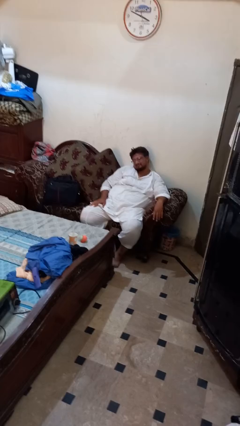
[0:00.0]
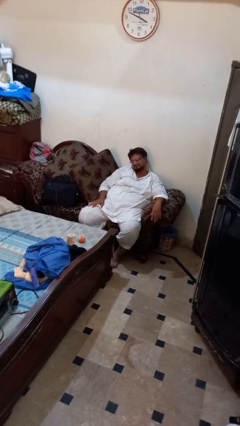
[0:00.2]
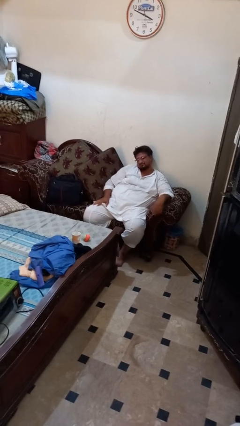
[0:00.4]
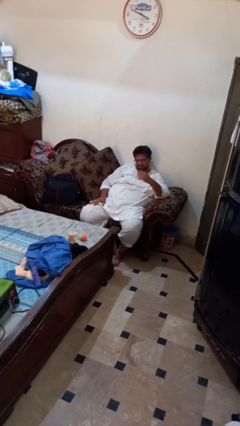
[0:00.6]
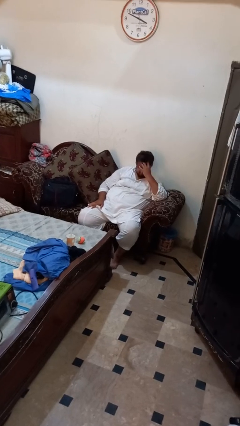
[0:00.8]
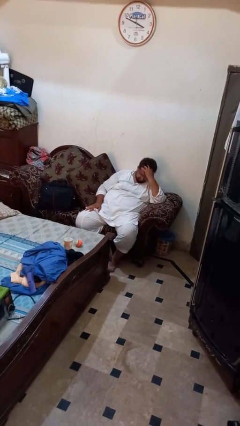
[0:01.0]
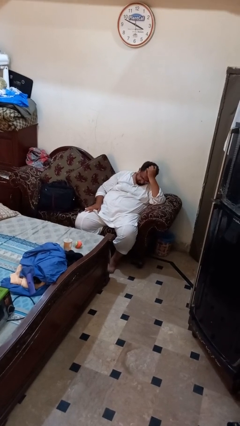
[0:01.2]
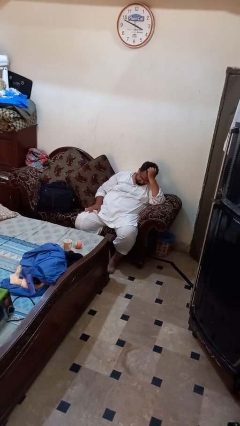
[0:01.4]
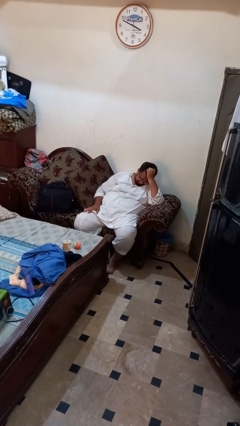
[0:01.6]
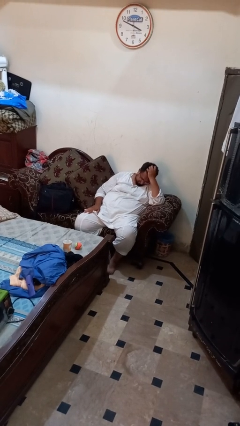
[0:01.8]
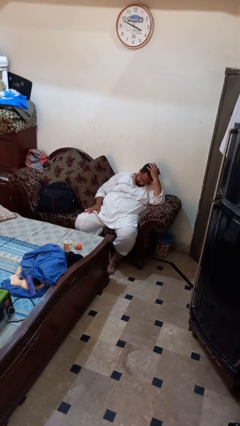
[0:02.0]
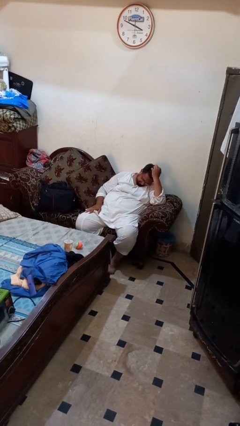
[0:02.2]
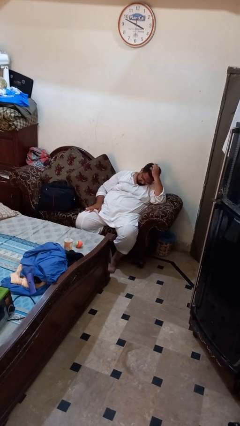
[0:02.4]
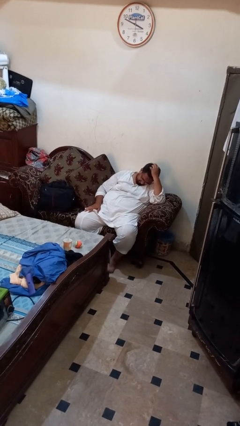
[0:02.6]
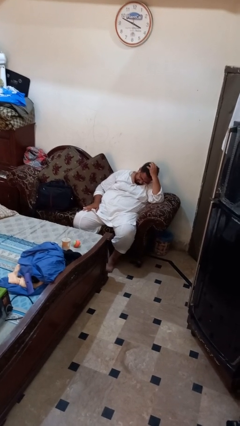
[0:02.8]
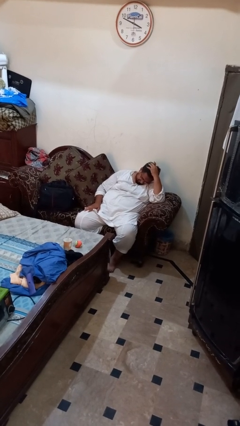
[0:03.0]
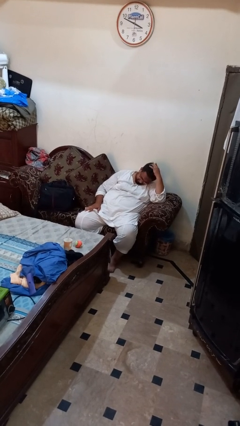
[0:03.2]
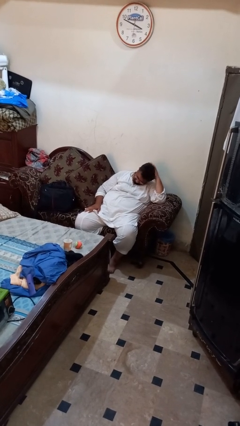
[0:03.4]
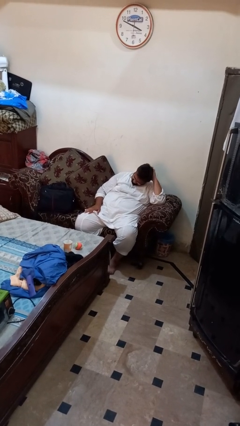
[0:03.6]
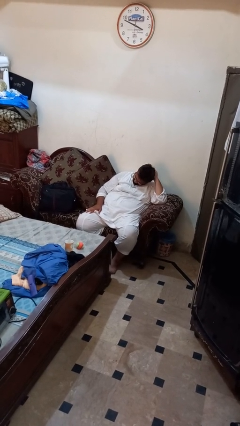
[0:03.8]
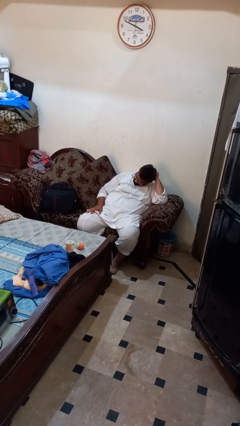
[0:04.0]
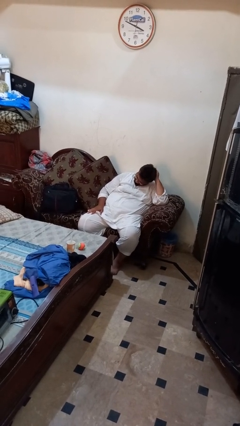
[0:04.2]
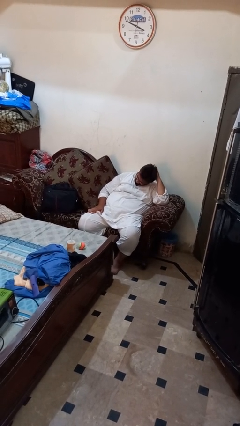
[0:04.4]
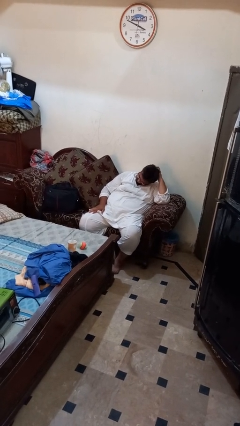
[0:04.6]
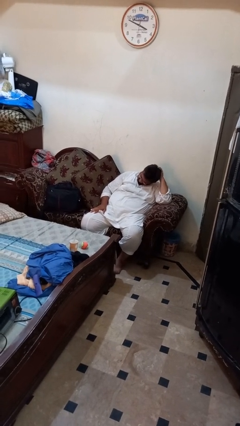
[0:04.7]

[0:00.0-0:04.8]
person strokes hair

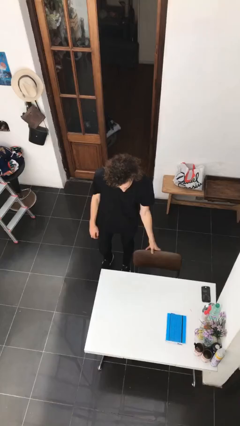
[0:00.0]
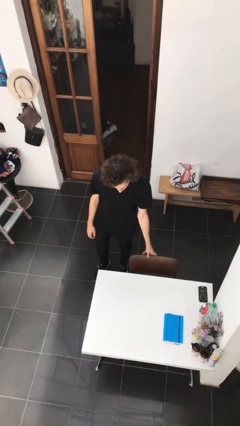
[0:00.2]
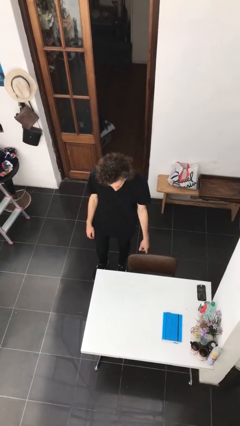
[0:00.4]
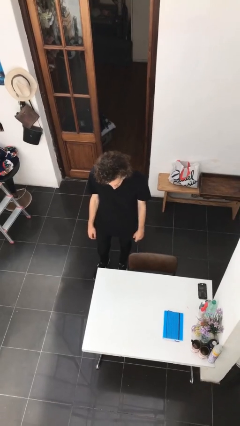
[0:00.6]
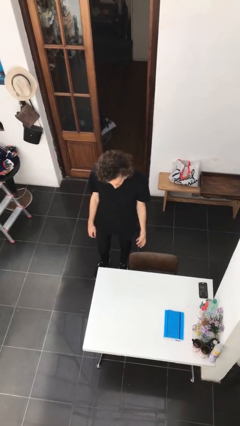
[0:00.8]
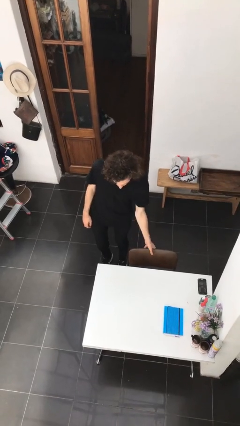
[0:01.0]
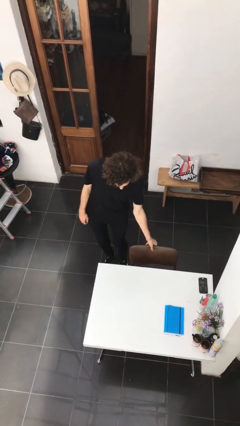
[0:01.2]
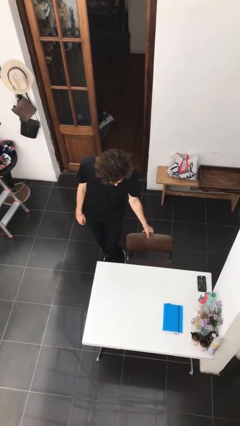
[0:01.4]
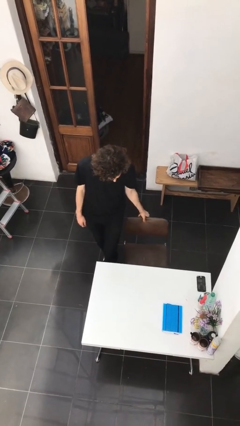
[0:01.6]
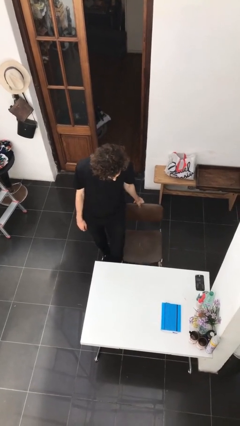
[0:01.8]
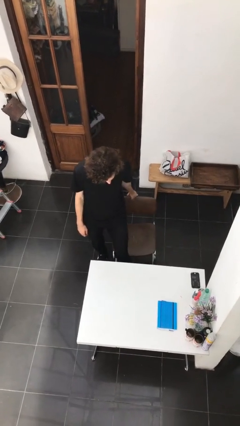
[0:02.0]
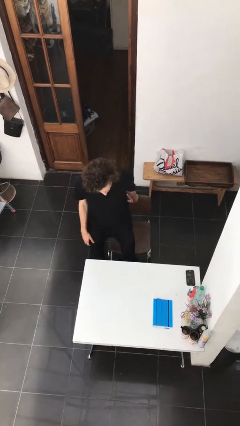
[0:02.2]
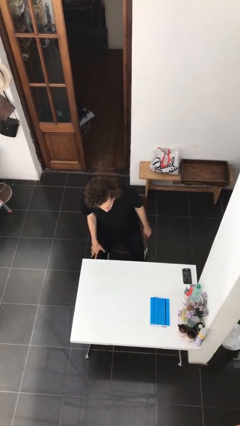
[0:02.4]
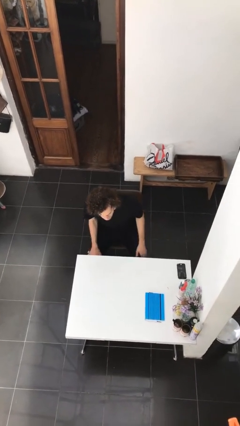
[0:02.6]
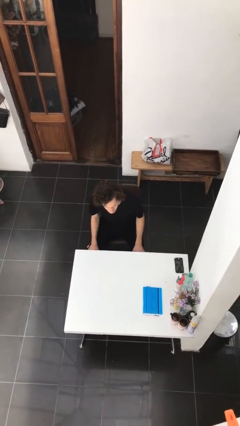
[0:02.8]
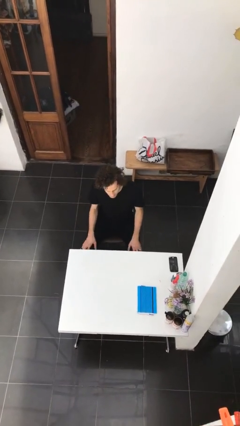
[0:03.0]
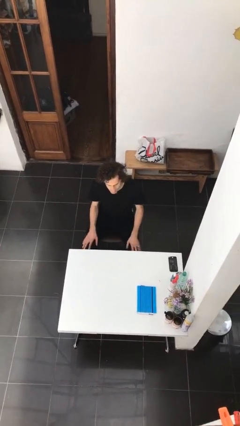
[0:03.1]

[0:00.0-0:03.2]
person sits down

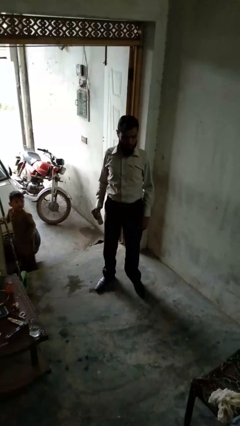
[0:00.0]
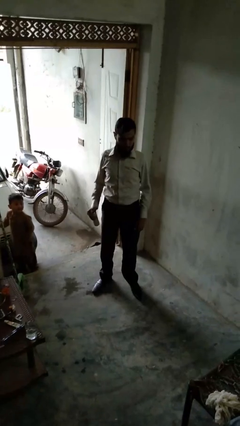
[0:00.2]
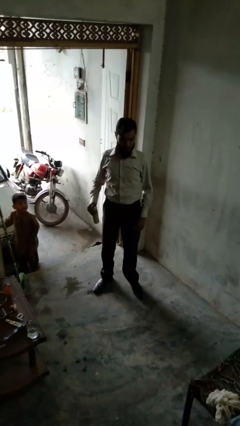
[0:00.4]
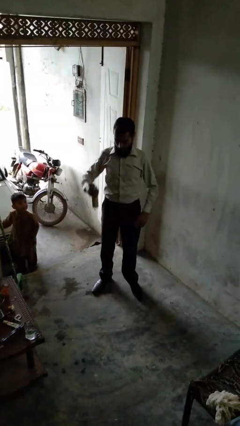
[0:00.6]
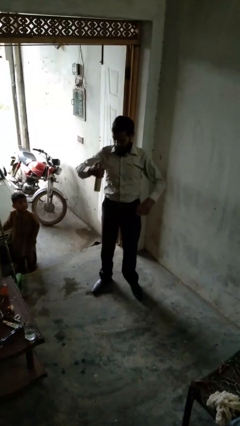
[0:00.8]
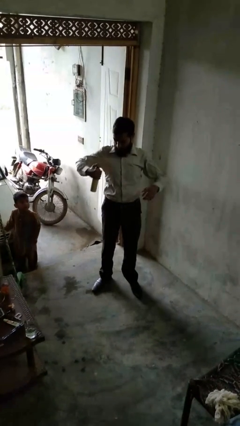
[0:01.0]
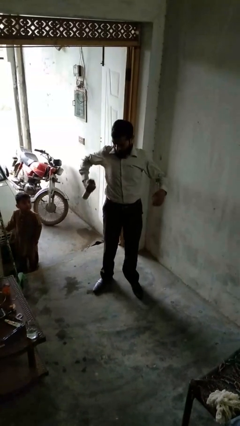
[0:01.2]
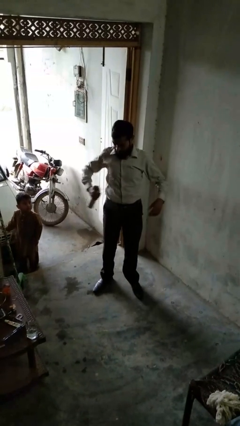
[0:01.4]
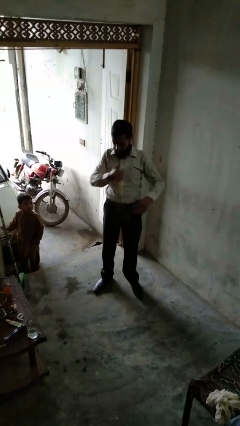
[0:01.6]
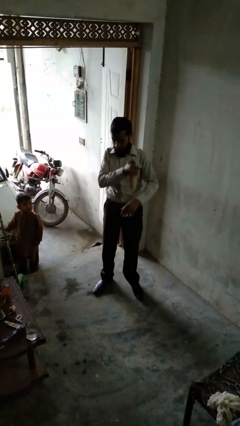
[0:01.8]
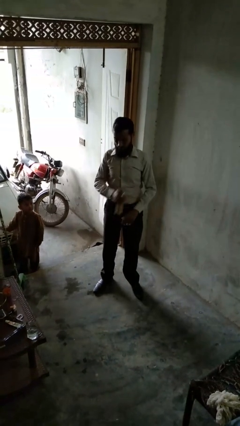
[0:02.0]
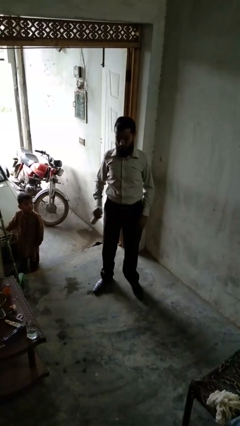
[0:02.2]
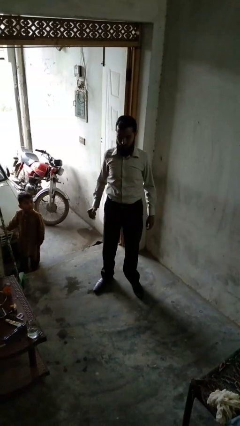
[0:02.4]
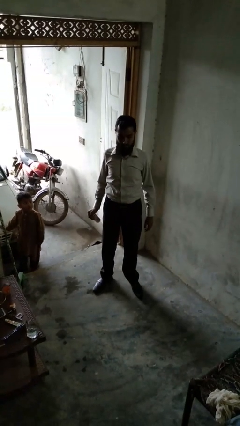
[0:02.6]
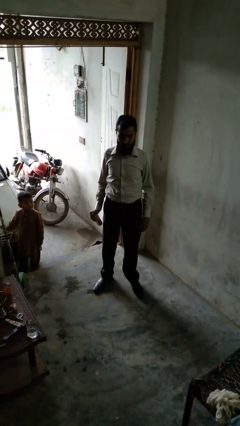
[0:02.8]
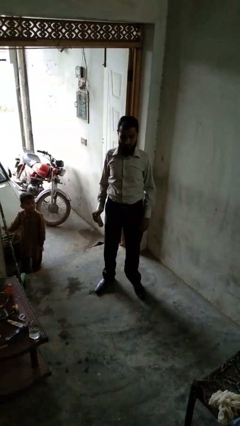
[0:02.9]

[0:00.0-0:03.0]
person applies deodorant

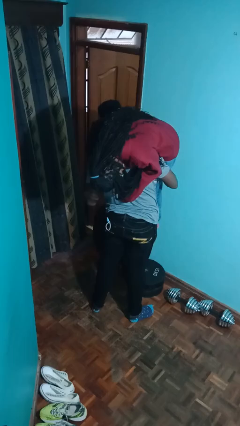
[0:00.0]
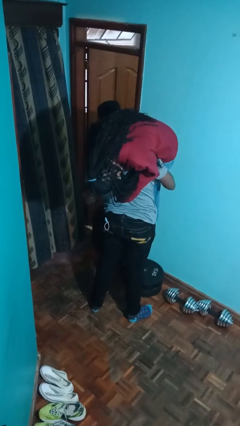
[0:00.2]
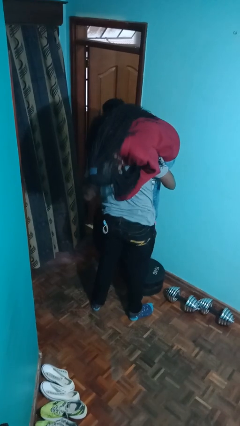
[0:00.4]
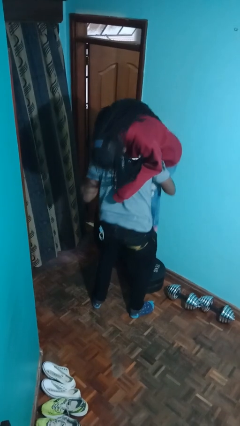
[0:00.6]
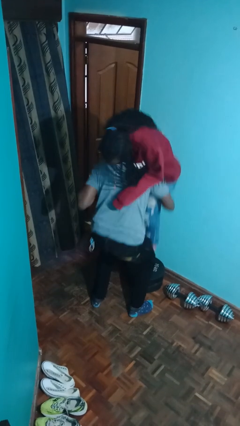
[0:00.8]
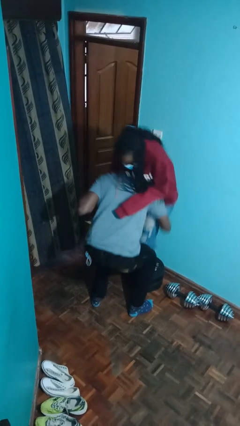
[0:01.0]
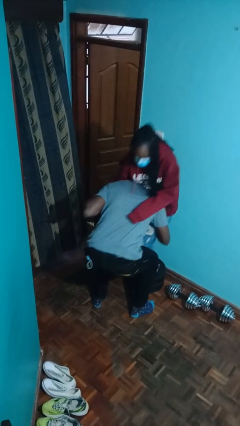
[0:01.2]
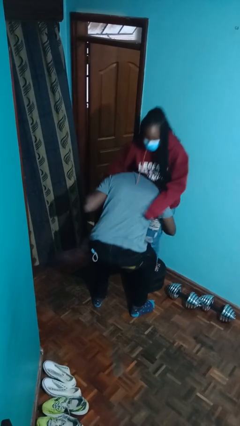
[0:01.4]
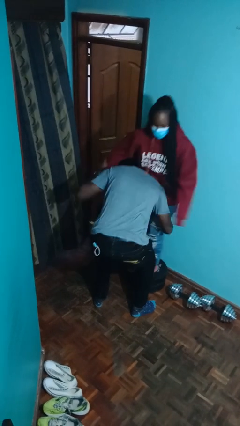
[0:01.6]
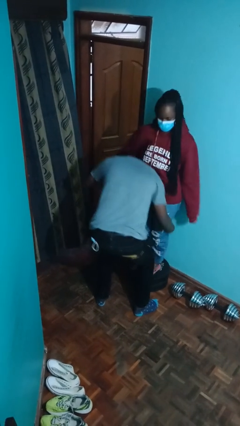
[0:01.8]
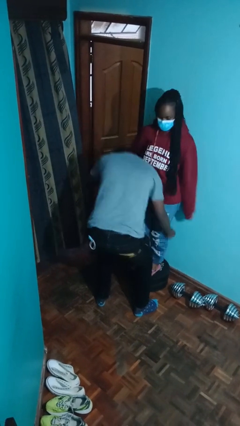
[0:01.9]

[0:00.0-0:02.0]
person puts down person

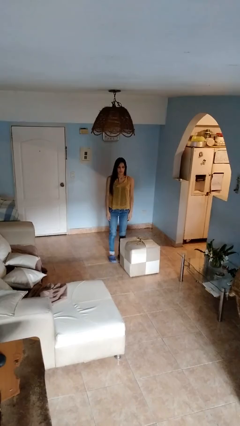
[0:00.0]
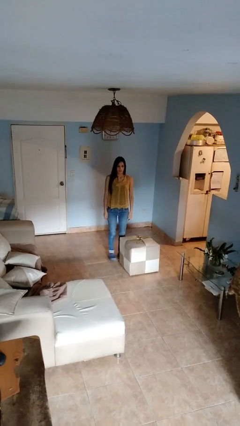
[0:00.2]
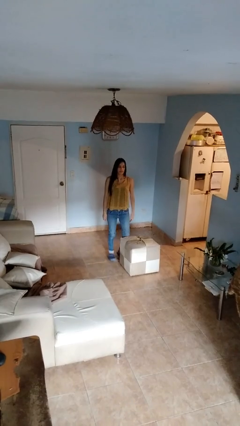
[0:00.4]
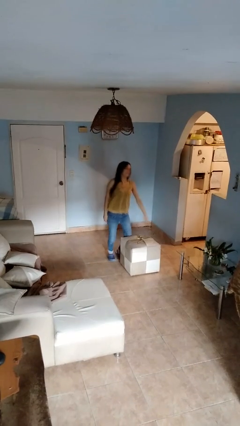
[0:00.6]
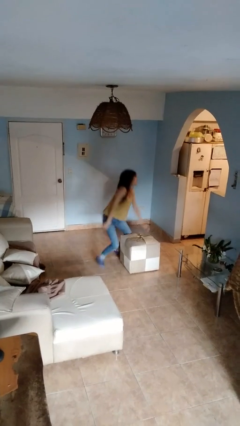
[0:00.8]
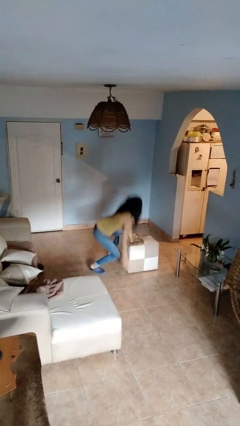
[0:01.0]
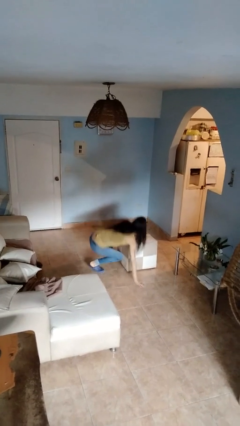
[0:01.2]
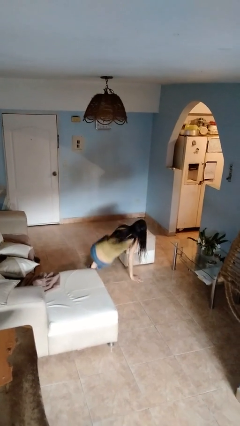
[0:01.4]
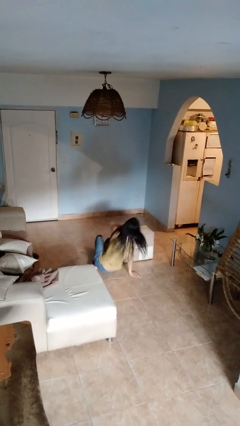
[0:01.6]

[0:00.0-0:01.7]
person trips on object on floor

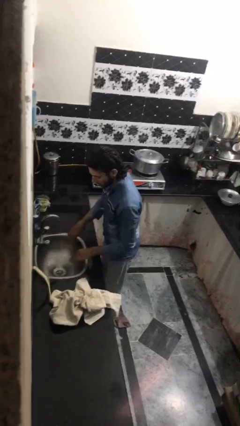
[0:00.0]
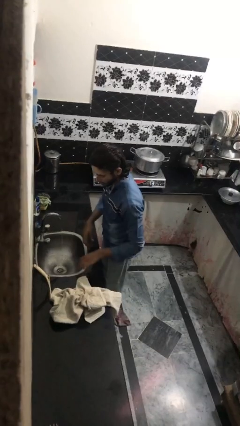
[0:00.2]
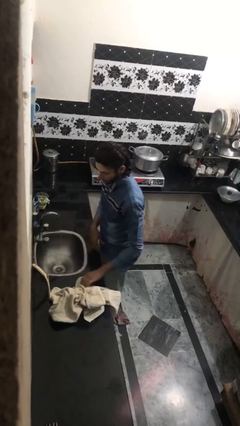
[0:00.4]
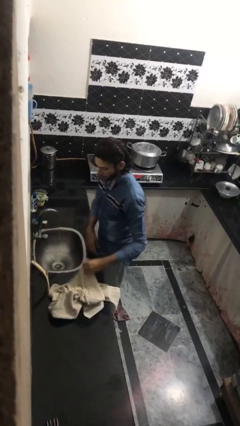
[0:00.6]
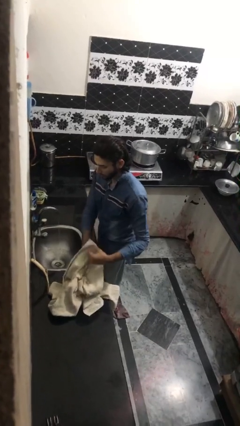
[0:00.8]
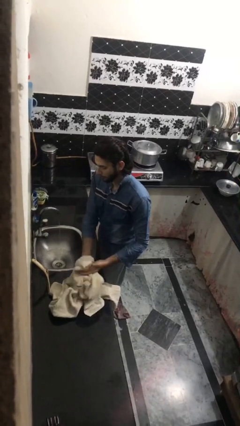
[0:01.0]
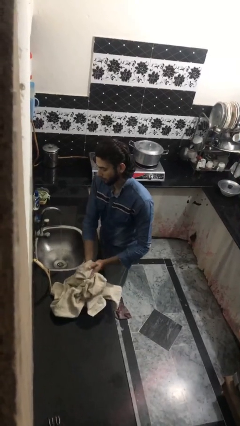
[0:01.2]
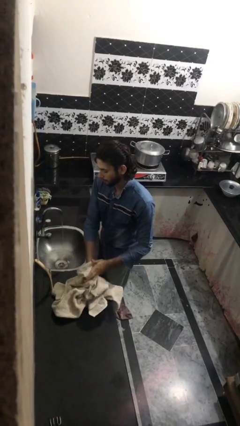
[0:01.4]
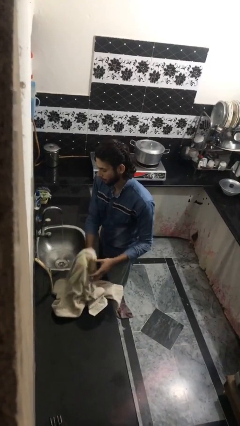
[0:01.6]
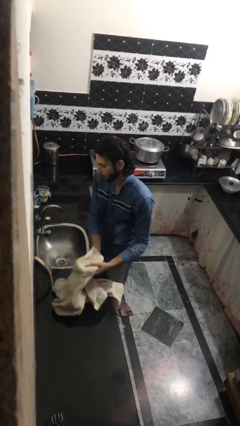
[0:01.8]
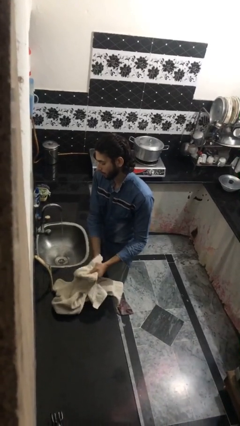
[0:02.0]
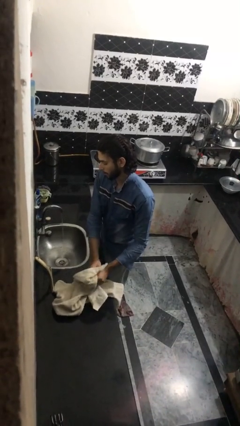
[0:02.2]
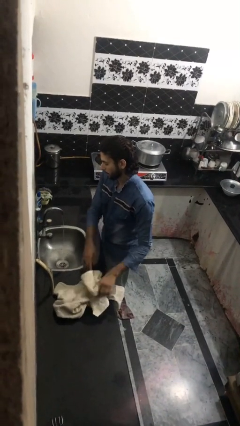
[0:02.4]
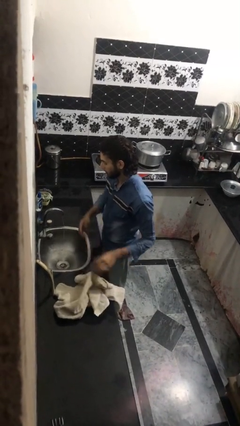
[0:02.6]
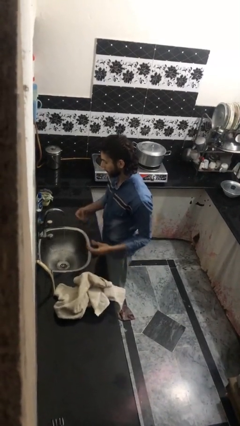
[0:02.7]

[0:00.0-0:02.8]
person dries hands with towel
